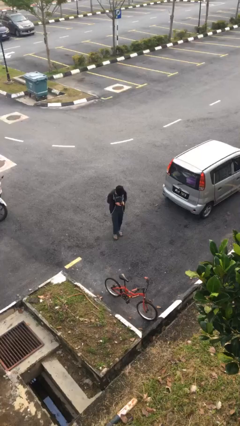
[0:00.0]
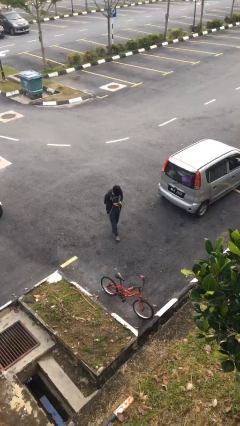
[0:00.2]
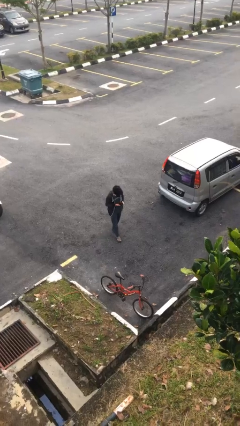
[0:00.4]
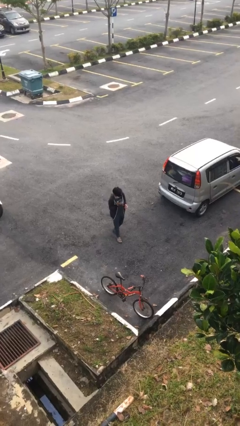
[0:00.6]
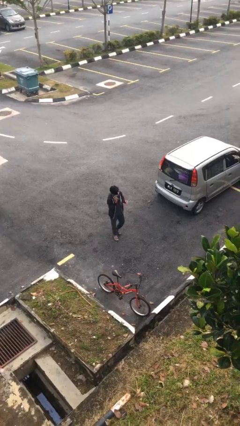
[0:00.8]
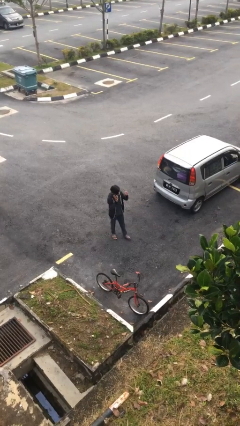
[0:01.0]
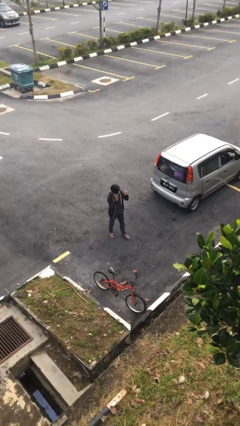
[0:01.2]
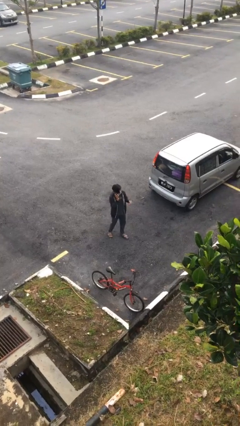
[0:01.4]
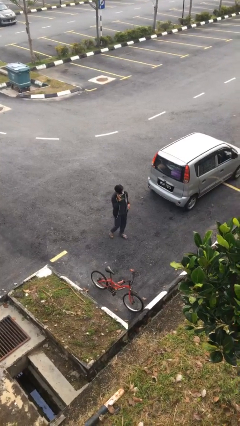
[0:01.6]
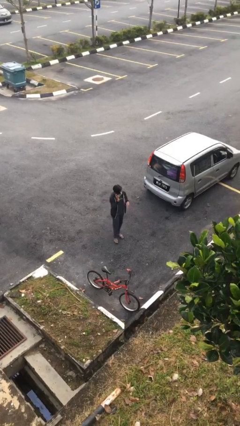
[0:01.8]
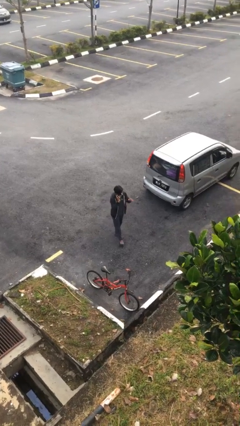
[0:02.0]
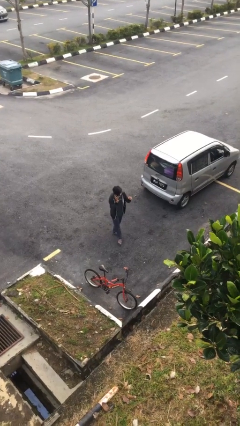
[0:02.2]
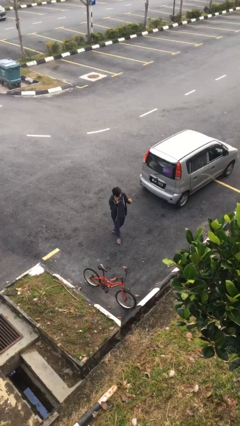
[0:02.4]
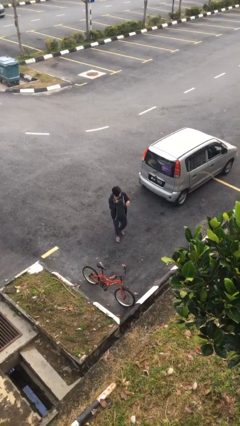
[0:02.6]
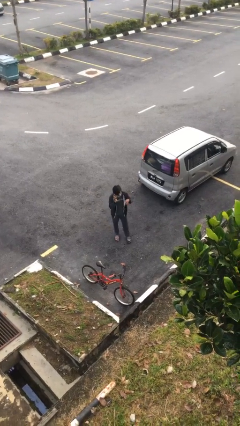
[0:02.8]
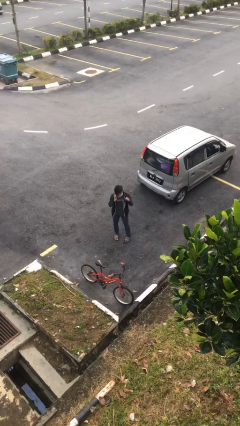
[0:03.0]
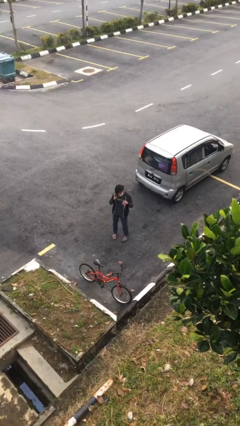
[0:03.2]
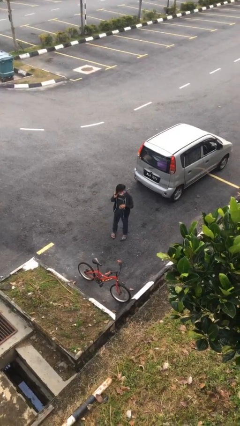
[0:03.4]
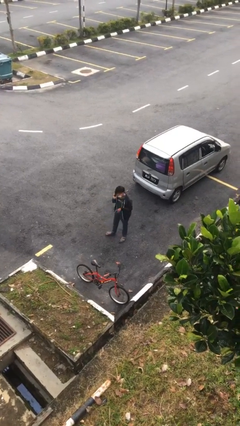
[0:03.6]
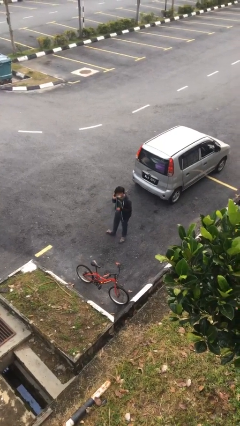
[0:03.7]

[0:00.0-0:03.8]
person talks on phone

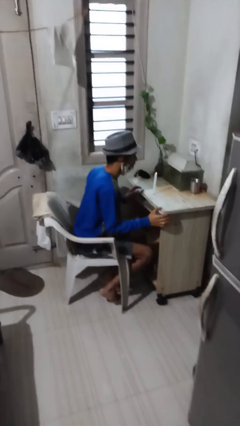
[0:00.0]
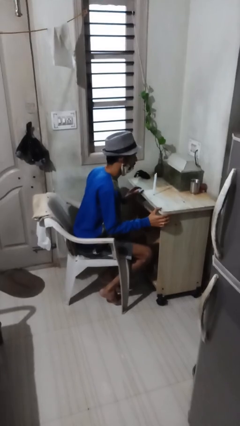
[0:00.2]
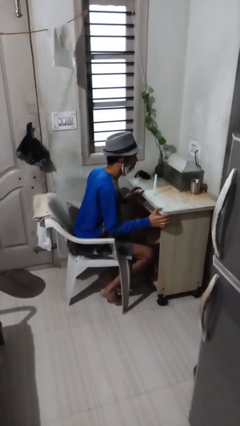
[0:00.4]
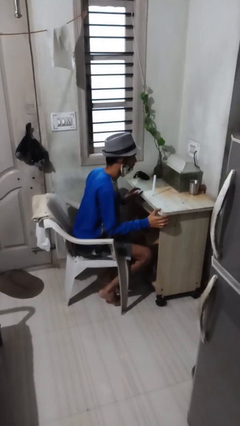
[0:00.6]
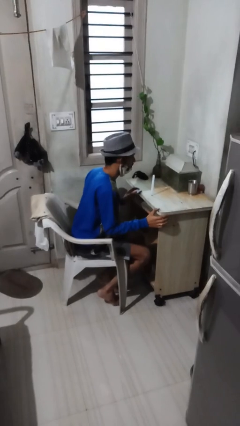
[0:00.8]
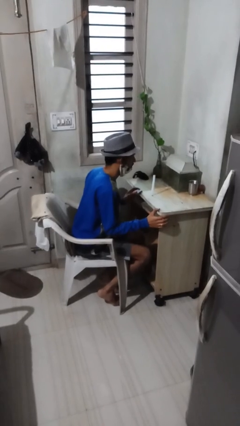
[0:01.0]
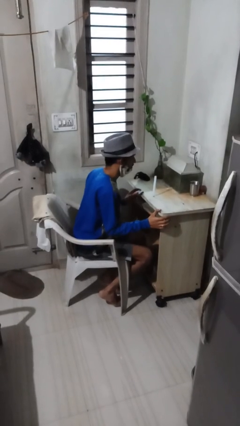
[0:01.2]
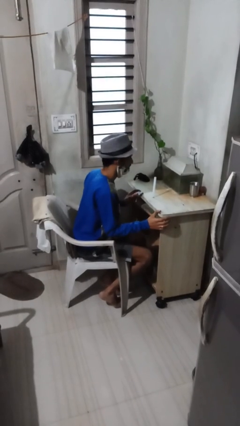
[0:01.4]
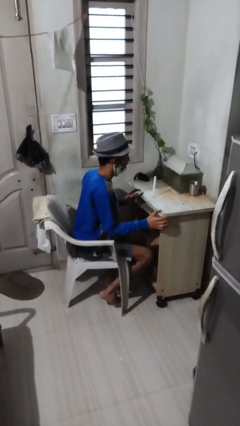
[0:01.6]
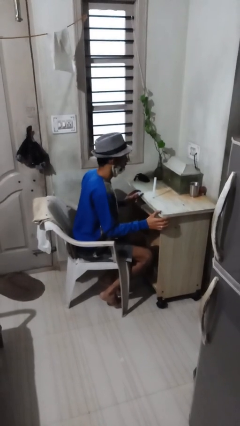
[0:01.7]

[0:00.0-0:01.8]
person extinguishes candle

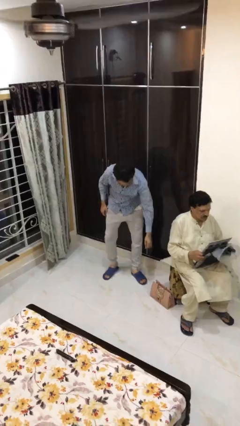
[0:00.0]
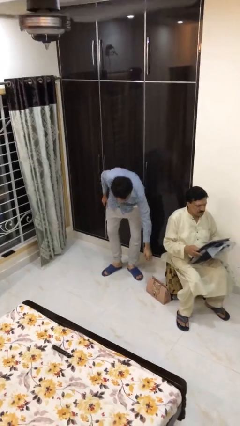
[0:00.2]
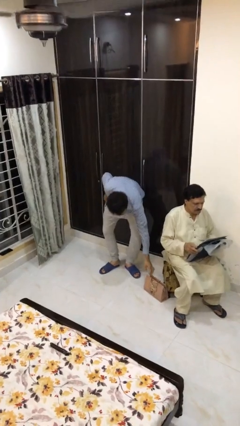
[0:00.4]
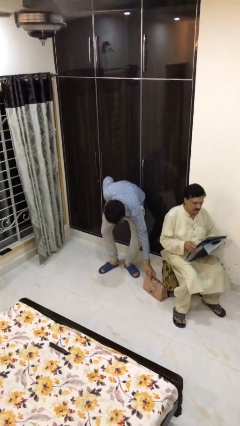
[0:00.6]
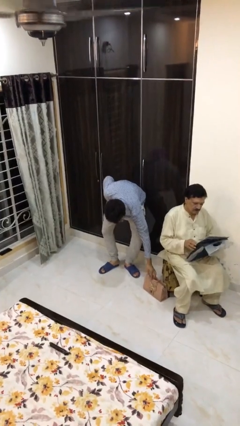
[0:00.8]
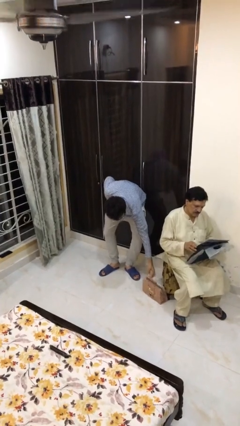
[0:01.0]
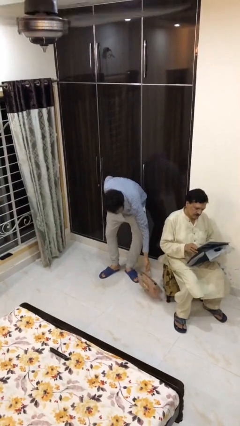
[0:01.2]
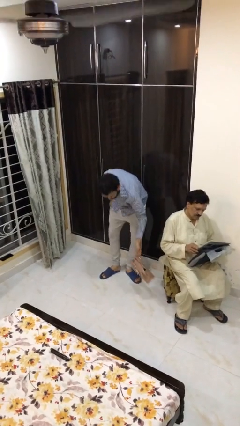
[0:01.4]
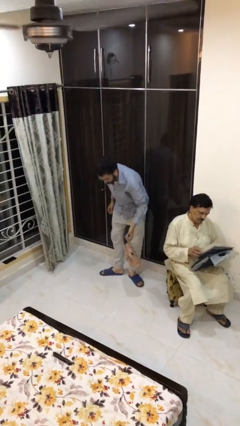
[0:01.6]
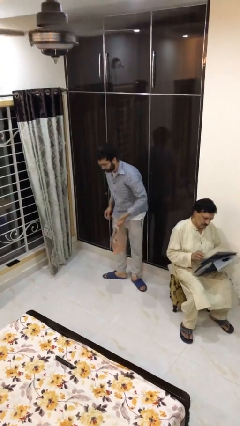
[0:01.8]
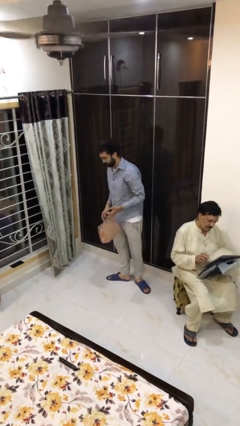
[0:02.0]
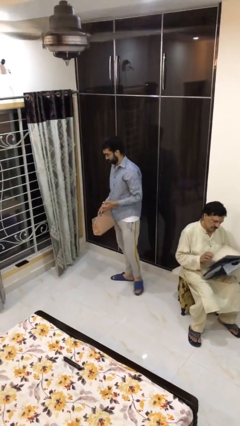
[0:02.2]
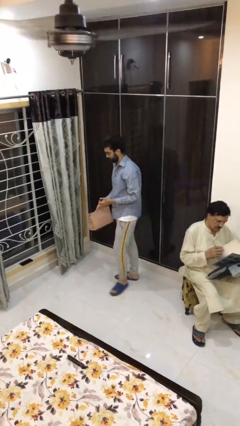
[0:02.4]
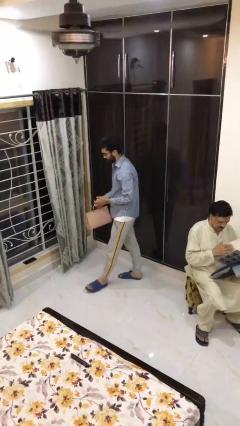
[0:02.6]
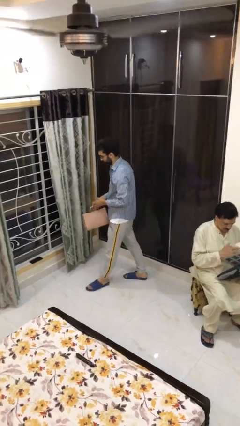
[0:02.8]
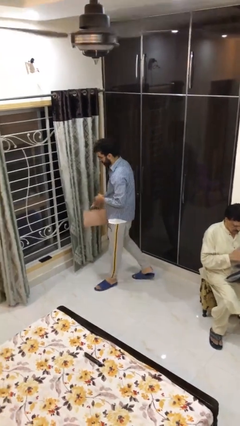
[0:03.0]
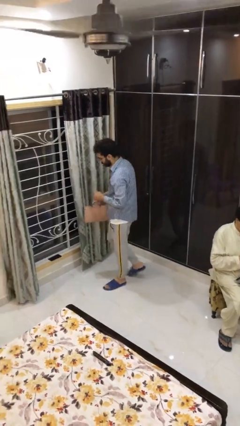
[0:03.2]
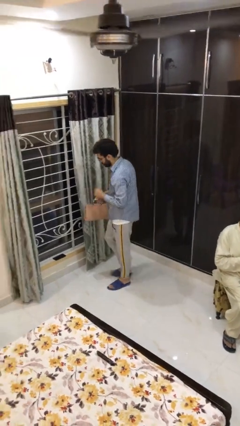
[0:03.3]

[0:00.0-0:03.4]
person steals object from person

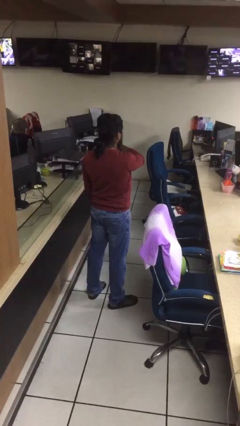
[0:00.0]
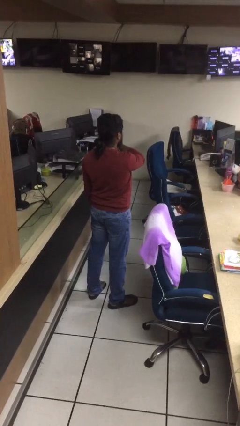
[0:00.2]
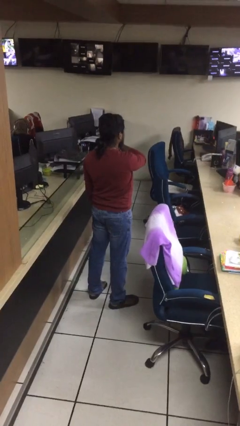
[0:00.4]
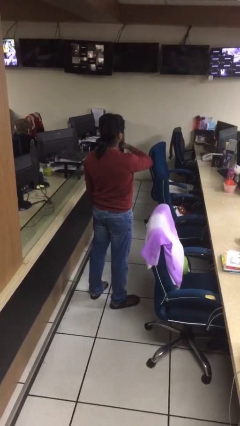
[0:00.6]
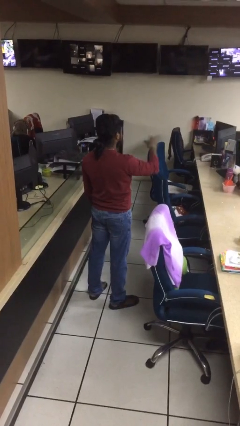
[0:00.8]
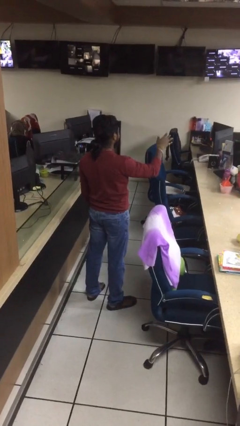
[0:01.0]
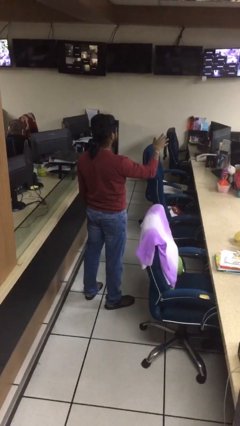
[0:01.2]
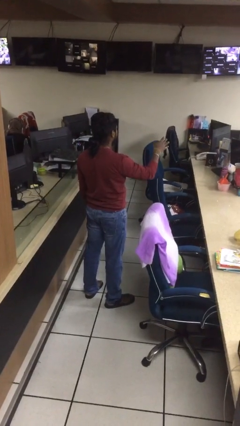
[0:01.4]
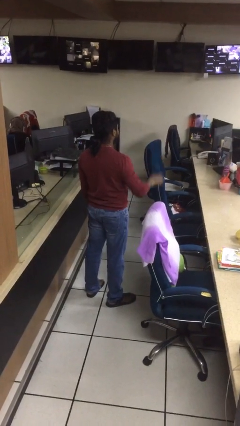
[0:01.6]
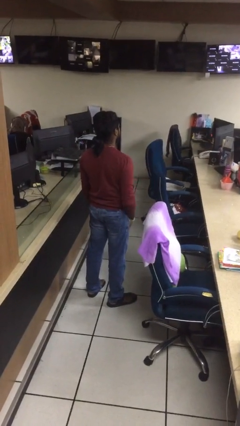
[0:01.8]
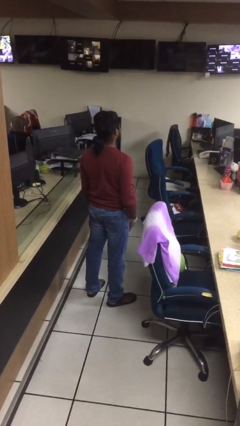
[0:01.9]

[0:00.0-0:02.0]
person gestures swipe right

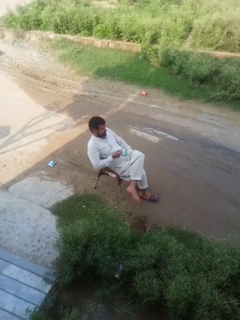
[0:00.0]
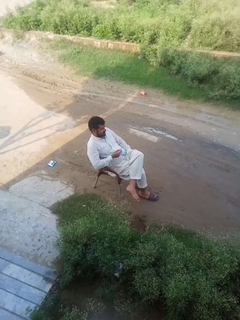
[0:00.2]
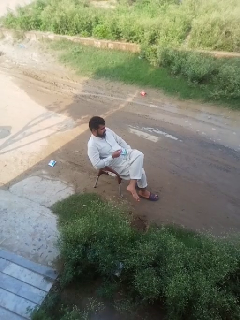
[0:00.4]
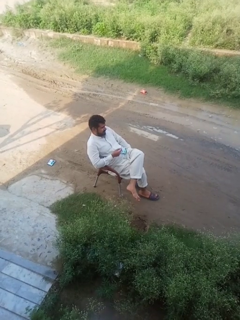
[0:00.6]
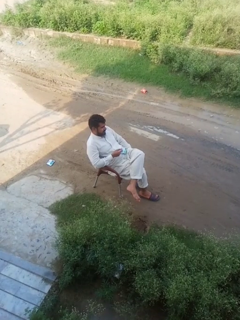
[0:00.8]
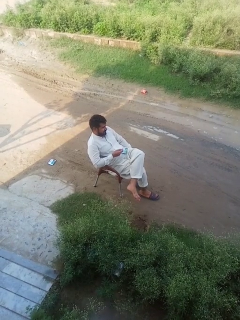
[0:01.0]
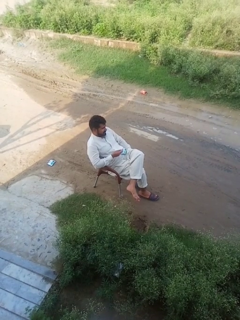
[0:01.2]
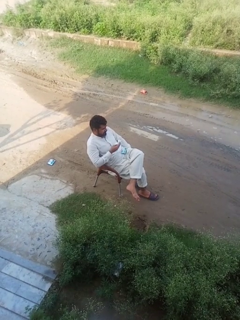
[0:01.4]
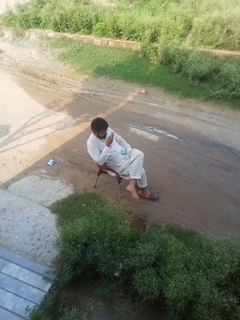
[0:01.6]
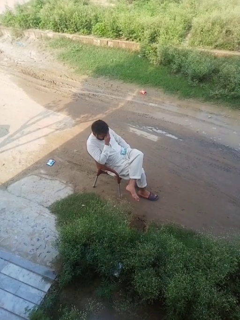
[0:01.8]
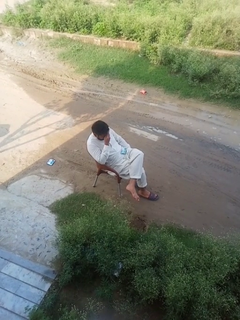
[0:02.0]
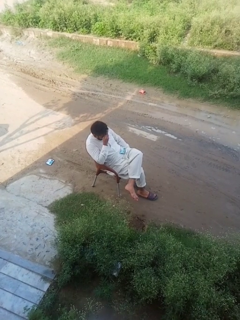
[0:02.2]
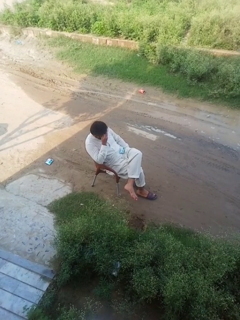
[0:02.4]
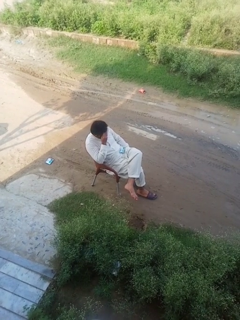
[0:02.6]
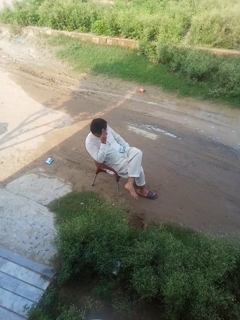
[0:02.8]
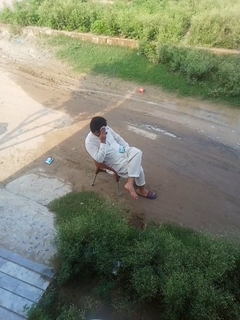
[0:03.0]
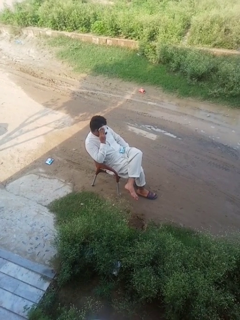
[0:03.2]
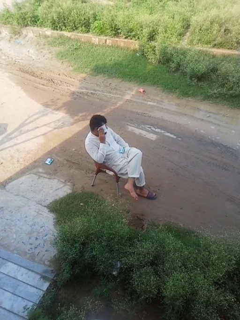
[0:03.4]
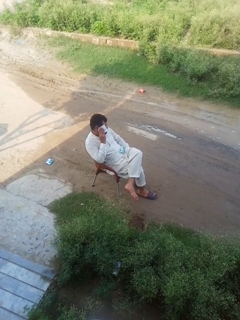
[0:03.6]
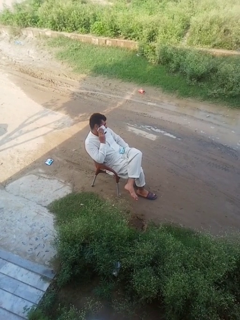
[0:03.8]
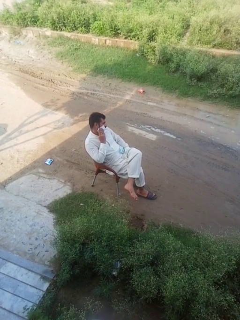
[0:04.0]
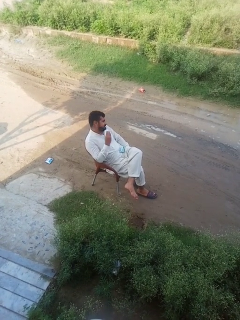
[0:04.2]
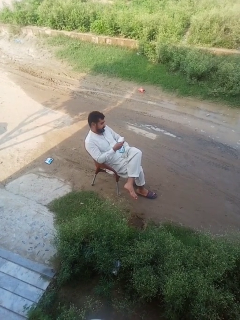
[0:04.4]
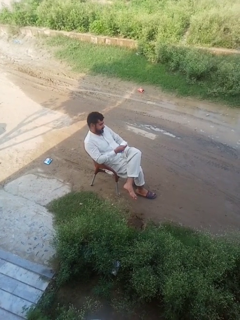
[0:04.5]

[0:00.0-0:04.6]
person wipes mouth with napkin

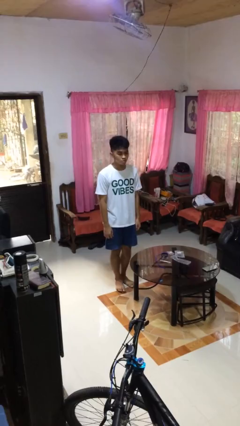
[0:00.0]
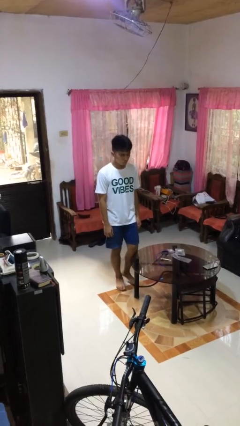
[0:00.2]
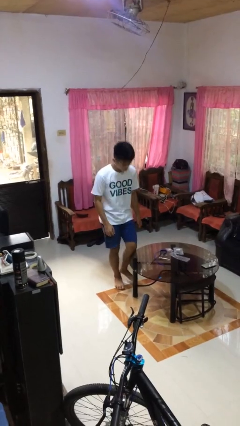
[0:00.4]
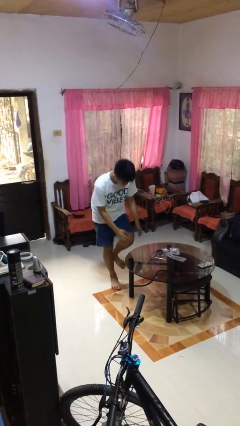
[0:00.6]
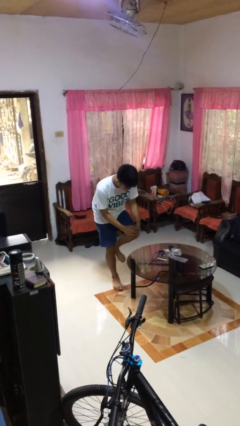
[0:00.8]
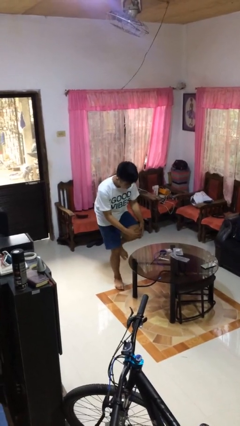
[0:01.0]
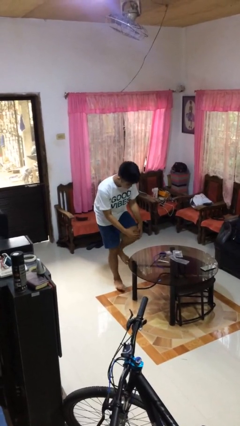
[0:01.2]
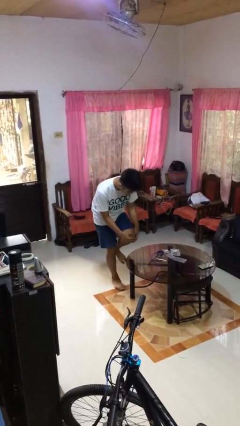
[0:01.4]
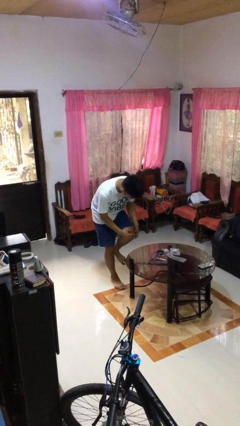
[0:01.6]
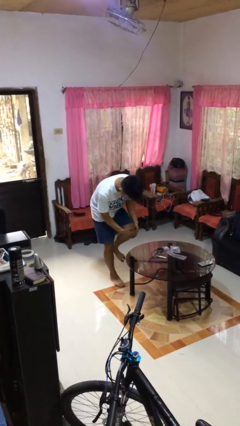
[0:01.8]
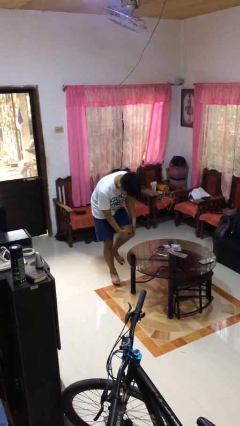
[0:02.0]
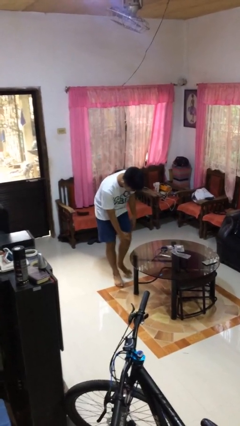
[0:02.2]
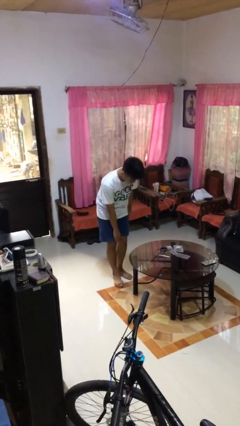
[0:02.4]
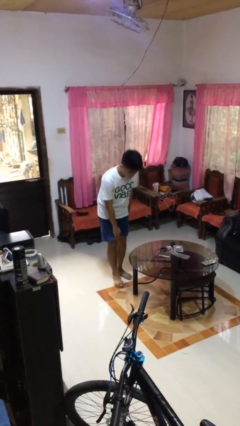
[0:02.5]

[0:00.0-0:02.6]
person bumps into table
